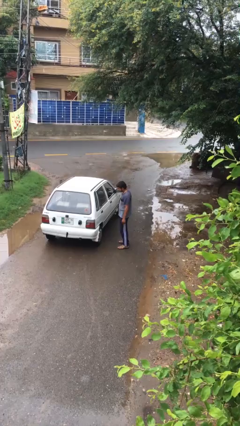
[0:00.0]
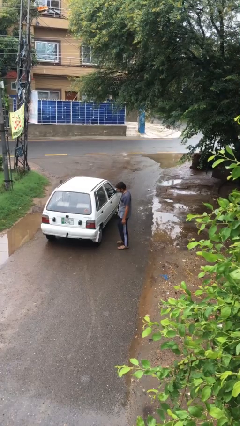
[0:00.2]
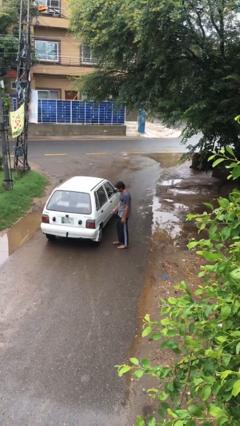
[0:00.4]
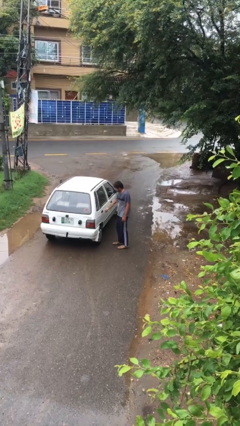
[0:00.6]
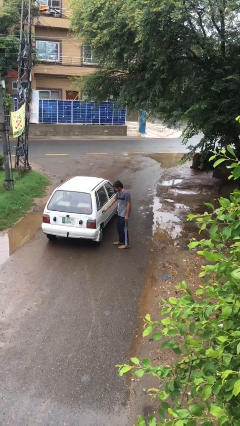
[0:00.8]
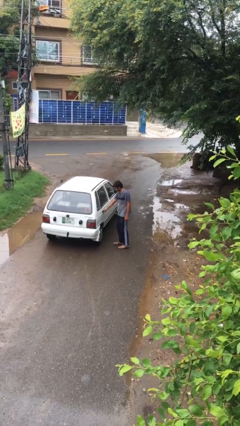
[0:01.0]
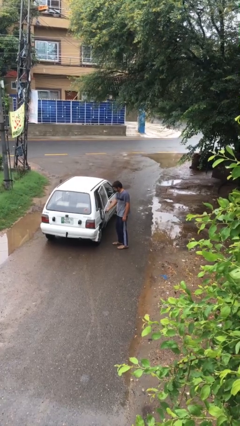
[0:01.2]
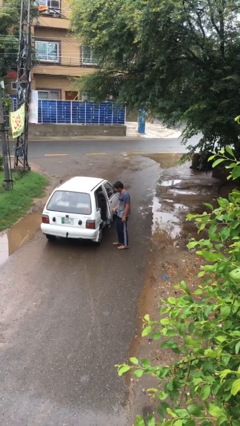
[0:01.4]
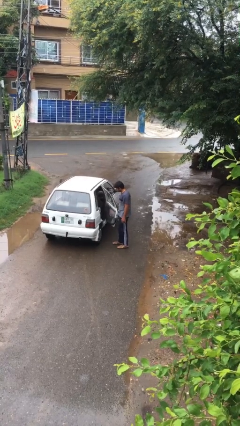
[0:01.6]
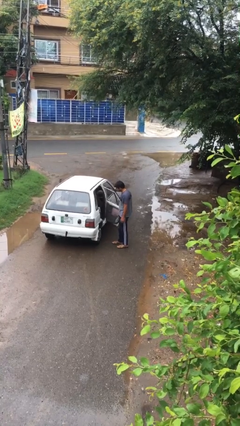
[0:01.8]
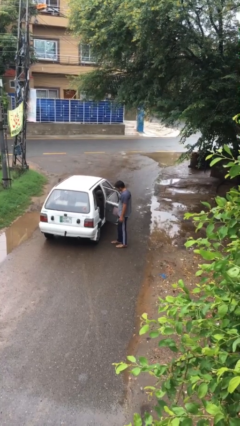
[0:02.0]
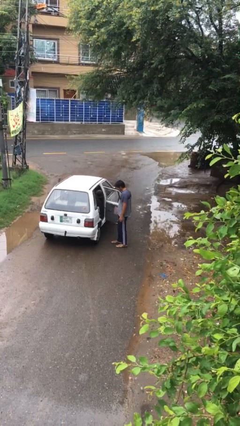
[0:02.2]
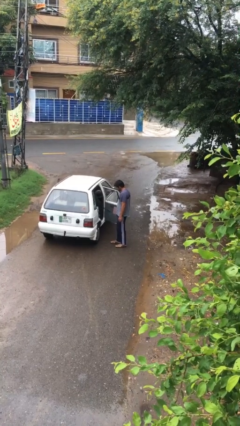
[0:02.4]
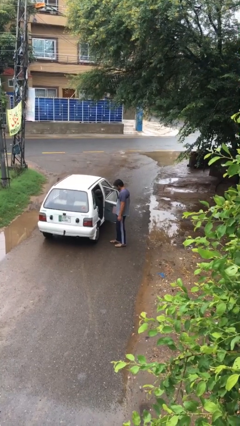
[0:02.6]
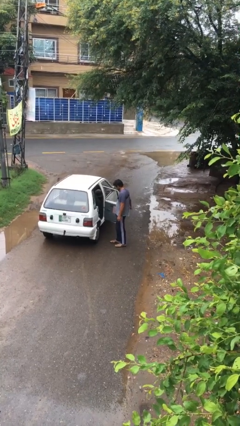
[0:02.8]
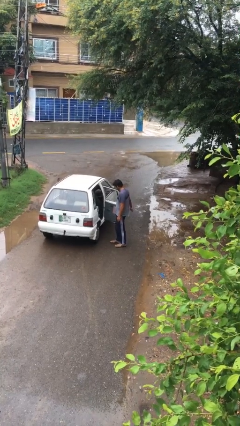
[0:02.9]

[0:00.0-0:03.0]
person opens car door

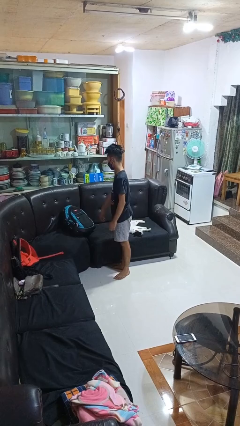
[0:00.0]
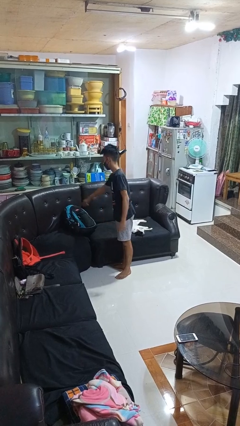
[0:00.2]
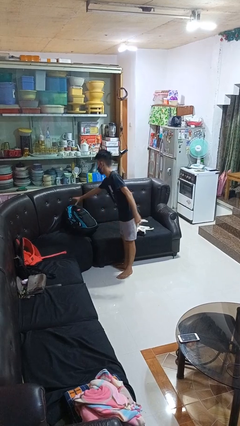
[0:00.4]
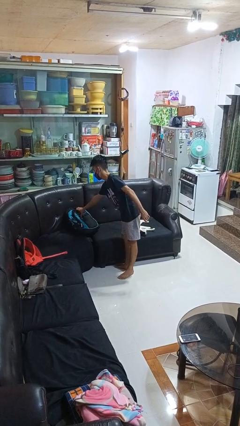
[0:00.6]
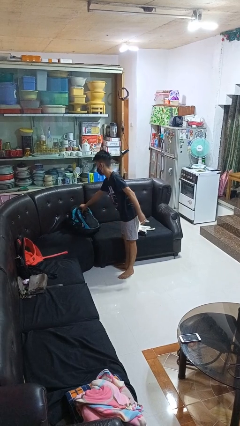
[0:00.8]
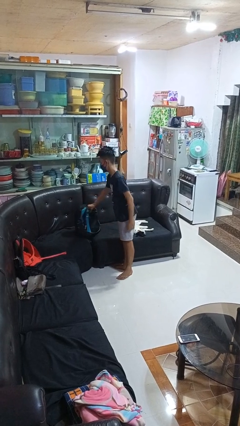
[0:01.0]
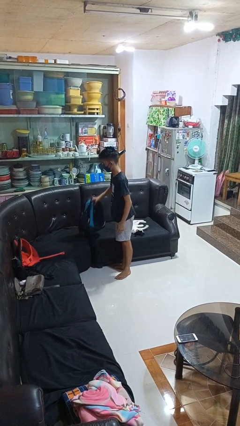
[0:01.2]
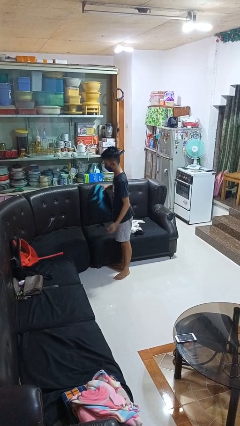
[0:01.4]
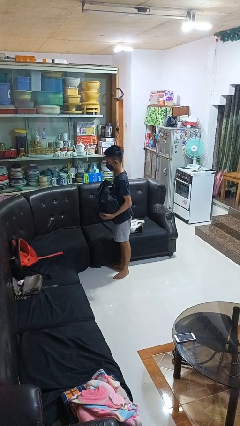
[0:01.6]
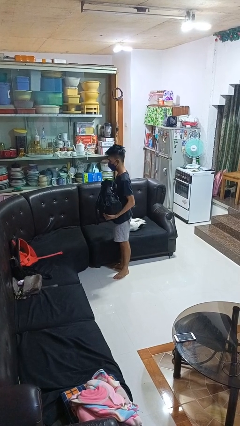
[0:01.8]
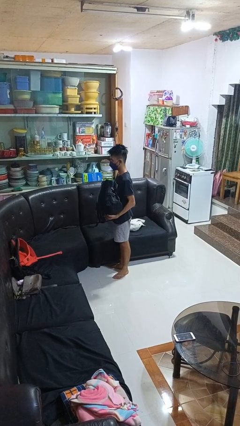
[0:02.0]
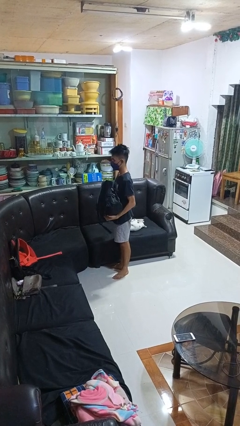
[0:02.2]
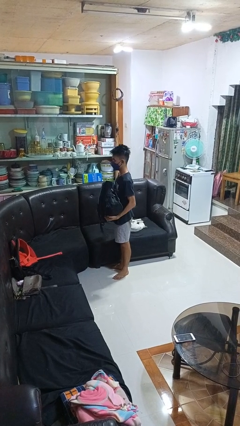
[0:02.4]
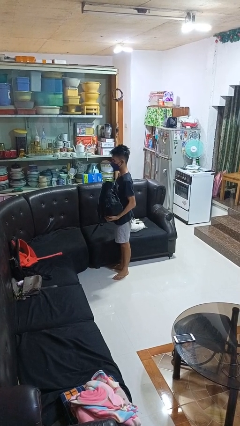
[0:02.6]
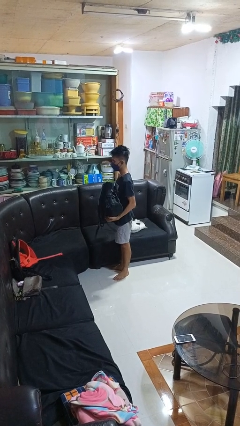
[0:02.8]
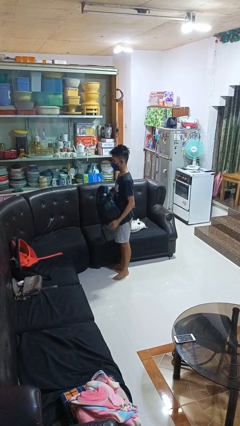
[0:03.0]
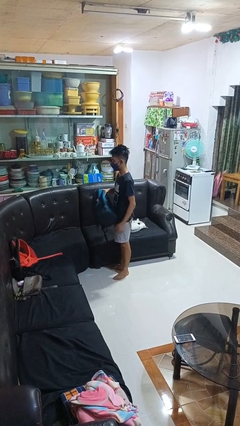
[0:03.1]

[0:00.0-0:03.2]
person picks up object from couch

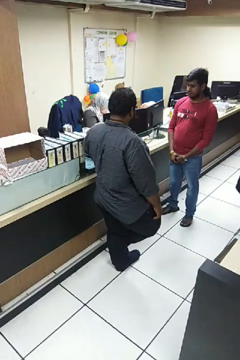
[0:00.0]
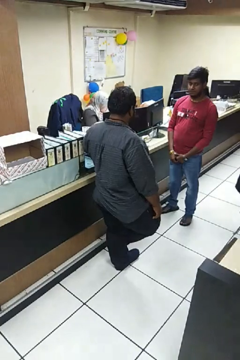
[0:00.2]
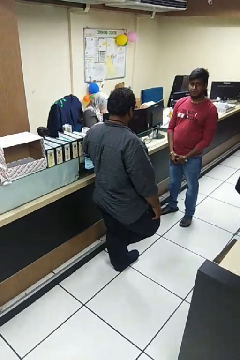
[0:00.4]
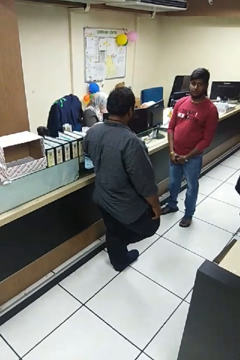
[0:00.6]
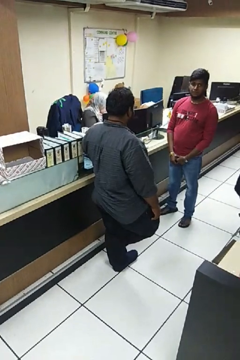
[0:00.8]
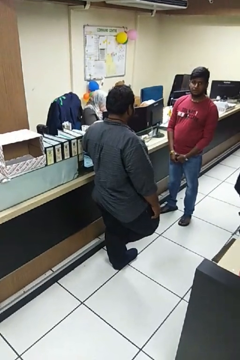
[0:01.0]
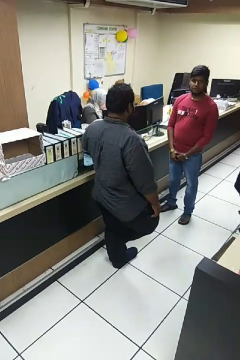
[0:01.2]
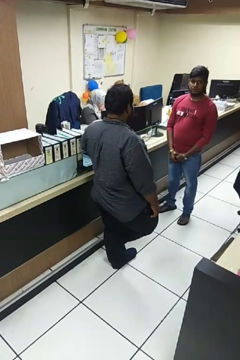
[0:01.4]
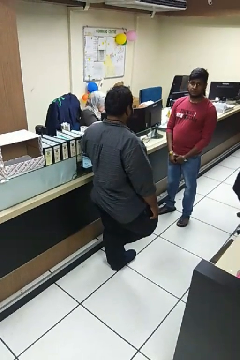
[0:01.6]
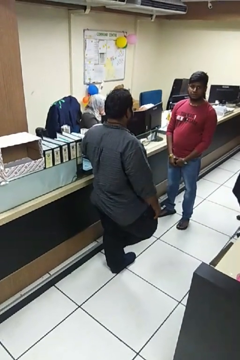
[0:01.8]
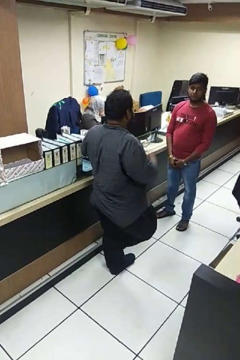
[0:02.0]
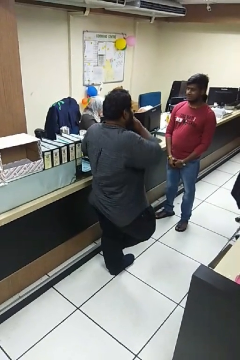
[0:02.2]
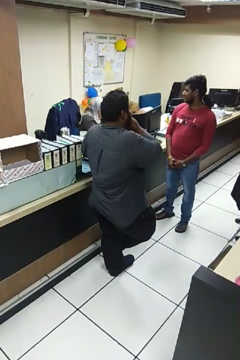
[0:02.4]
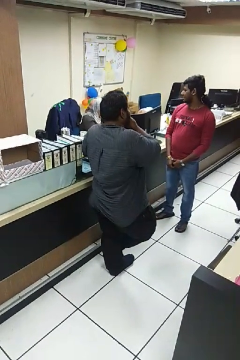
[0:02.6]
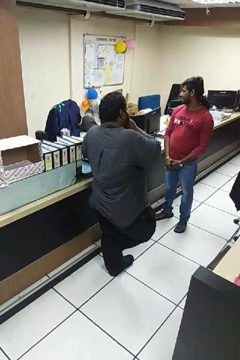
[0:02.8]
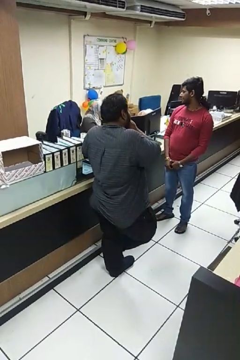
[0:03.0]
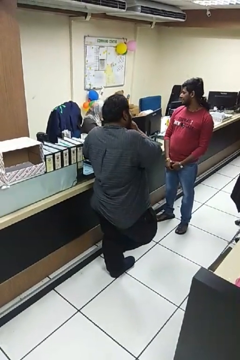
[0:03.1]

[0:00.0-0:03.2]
person laughs with person

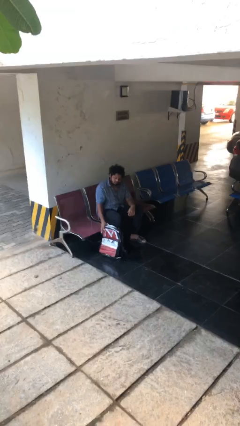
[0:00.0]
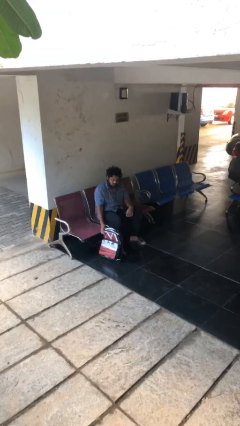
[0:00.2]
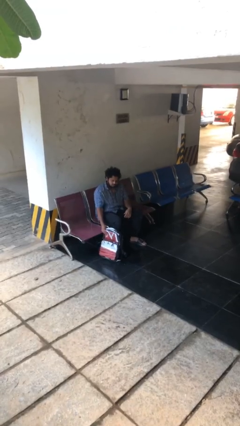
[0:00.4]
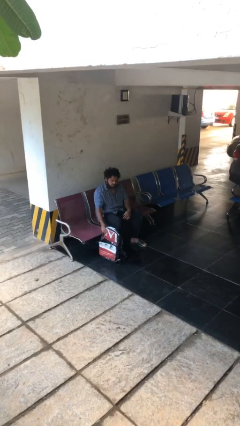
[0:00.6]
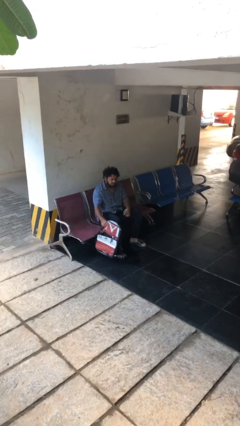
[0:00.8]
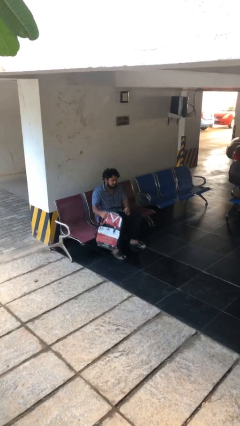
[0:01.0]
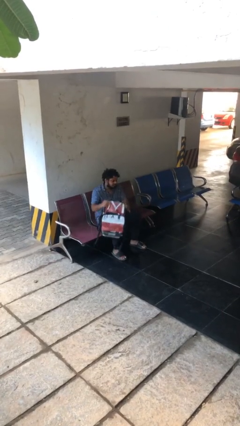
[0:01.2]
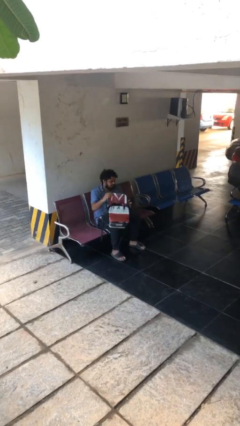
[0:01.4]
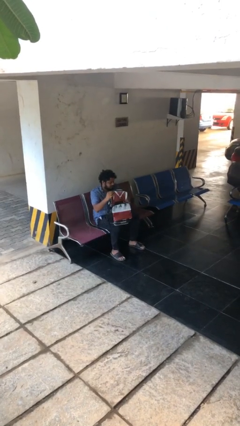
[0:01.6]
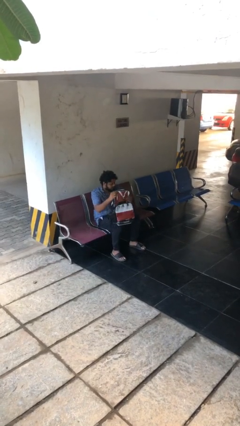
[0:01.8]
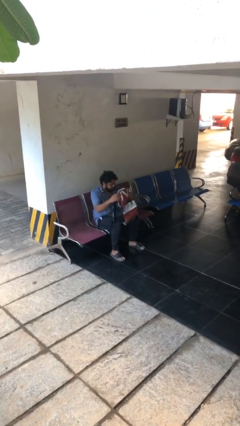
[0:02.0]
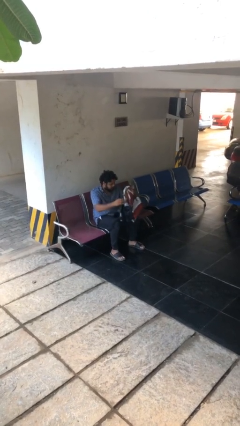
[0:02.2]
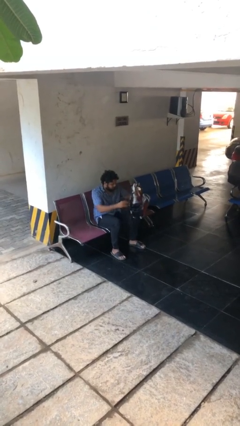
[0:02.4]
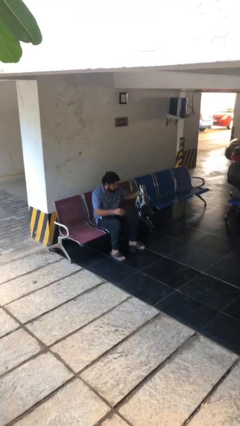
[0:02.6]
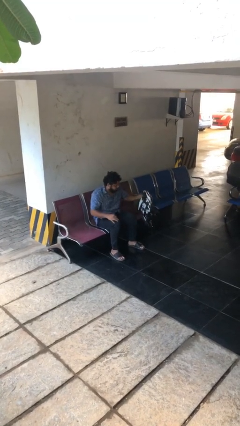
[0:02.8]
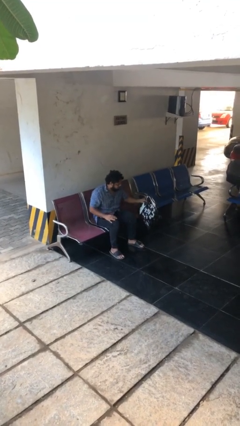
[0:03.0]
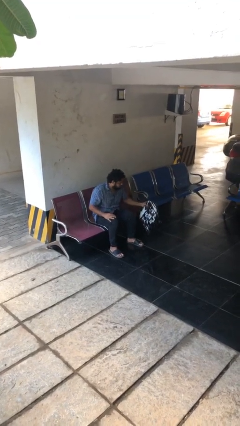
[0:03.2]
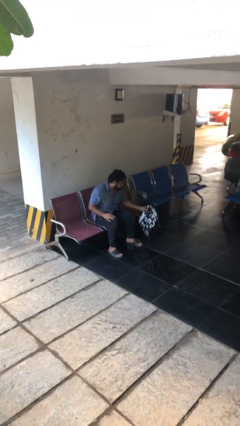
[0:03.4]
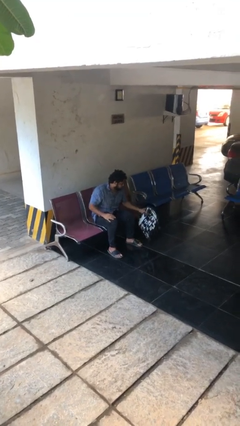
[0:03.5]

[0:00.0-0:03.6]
person picks up object from floor

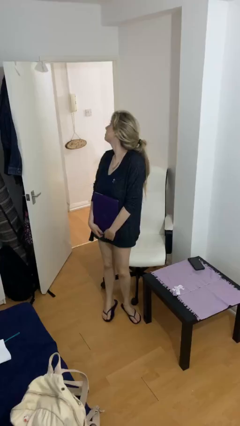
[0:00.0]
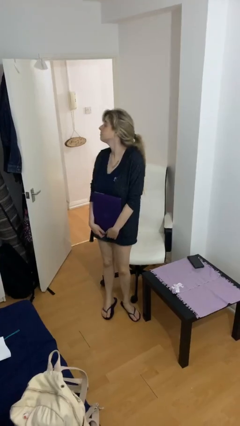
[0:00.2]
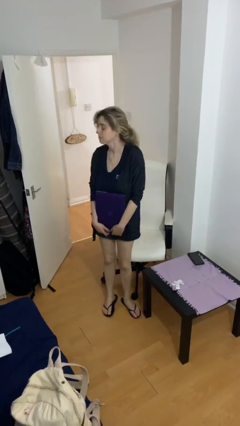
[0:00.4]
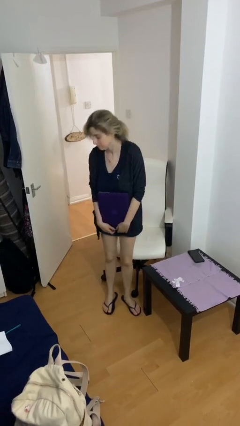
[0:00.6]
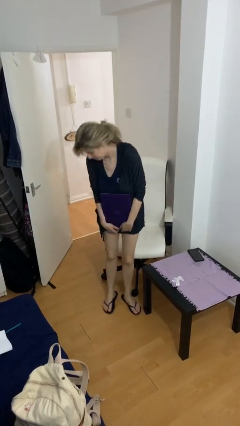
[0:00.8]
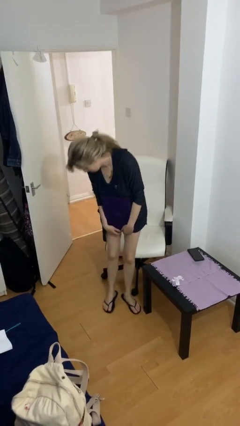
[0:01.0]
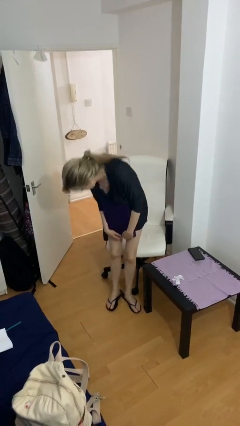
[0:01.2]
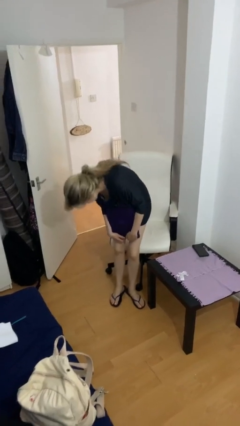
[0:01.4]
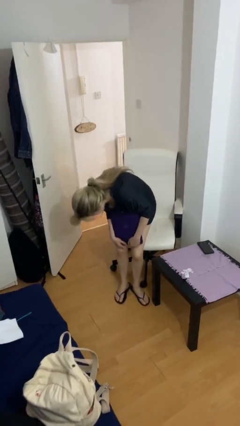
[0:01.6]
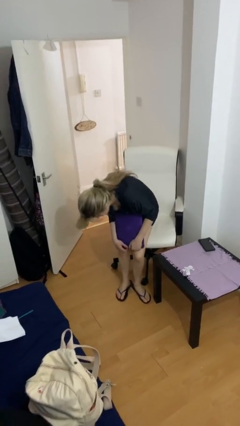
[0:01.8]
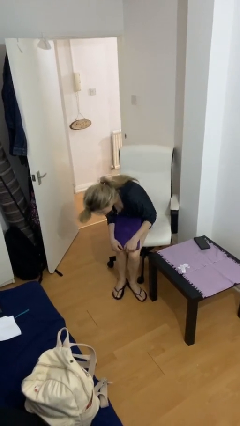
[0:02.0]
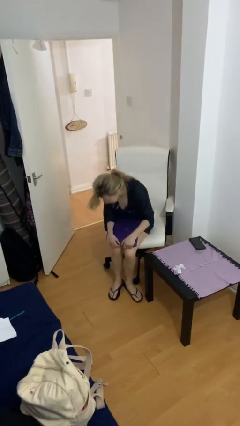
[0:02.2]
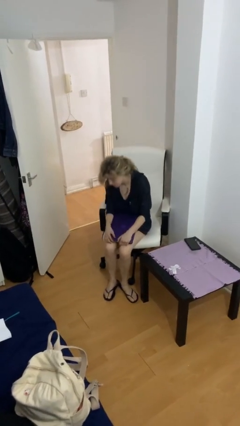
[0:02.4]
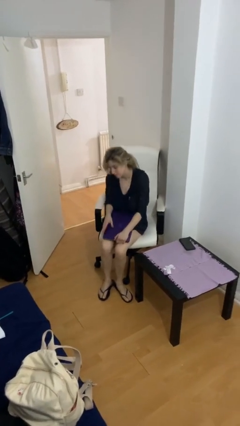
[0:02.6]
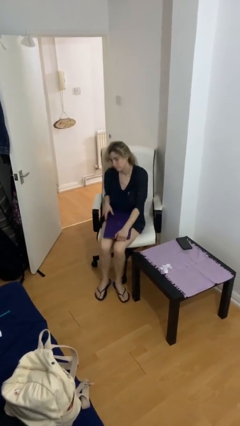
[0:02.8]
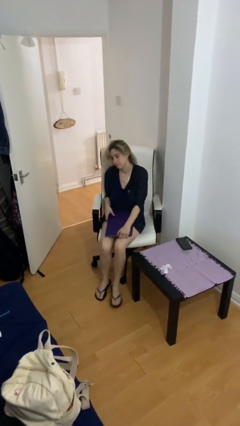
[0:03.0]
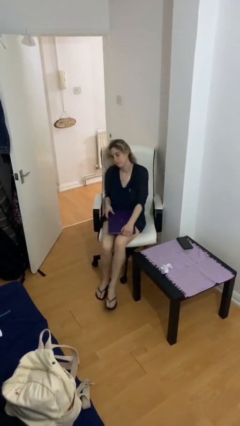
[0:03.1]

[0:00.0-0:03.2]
person sits down

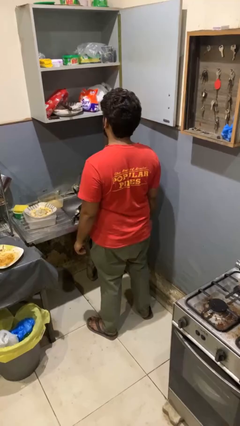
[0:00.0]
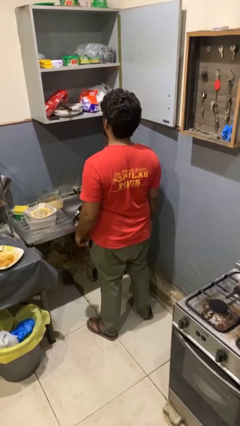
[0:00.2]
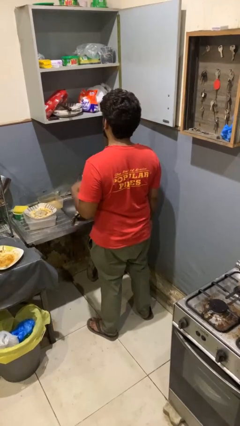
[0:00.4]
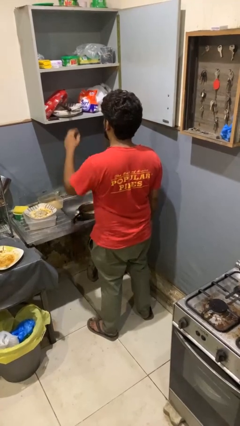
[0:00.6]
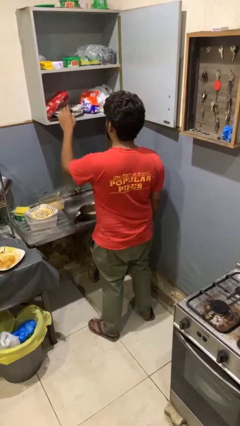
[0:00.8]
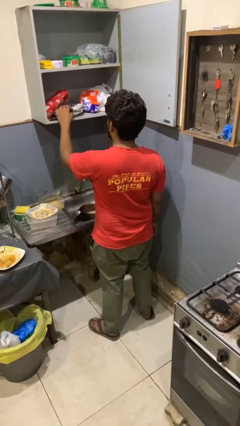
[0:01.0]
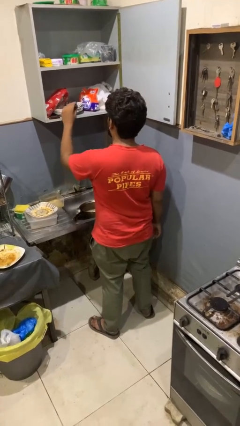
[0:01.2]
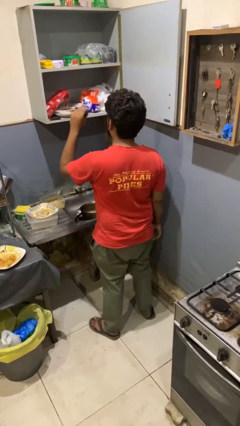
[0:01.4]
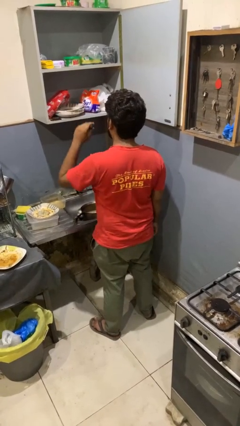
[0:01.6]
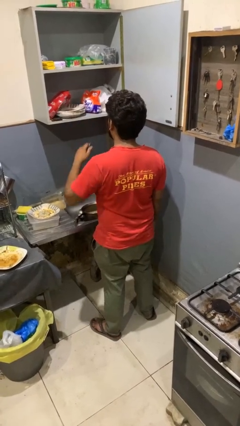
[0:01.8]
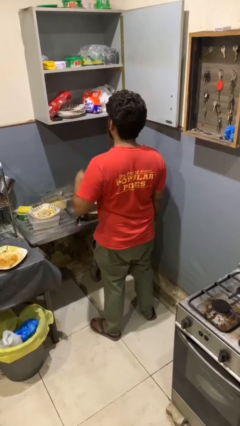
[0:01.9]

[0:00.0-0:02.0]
person takes object from cabinet
